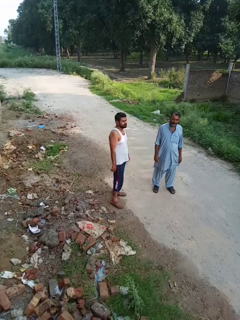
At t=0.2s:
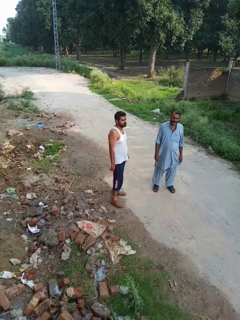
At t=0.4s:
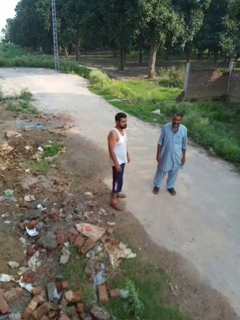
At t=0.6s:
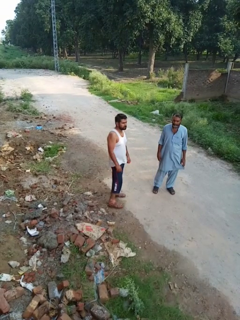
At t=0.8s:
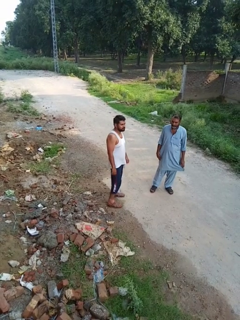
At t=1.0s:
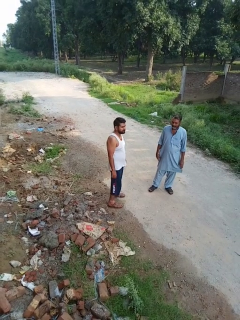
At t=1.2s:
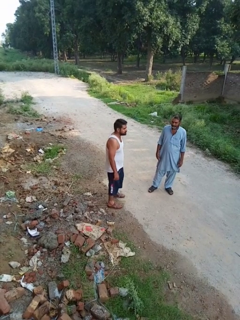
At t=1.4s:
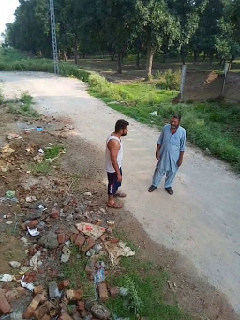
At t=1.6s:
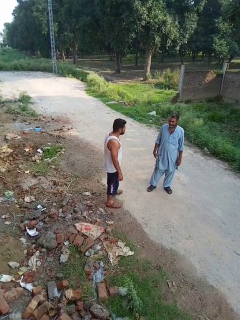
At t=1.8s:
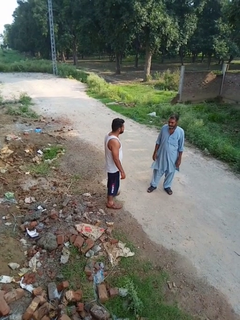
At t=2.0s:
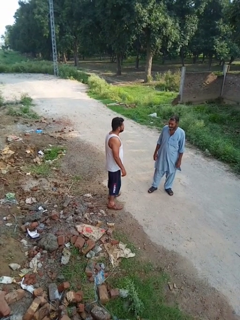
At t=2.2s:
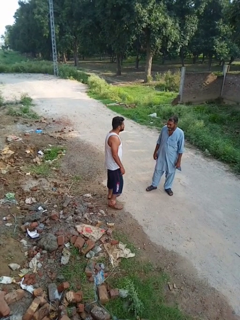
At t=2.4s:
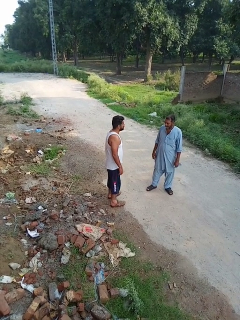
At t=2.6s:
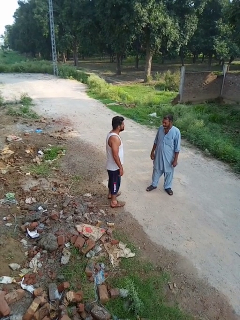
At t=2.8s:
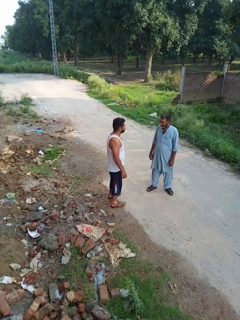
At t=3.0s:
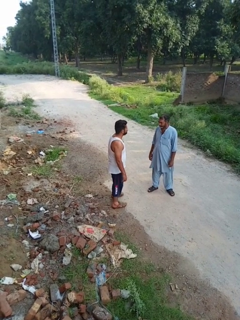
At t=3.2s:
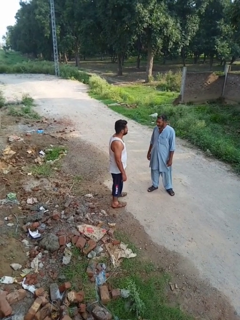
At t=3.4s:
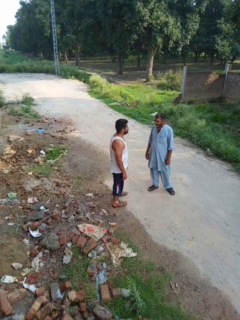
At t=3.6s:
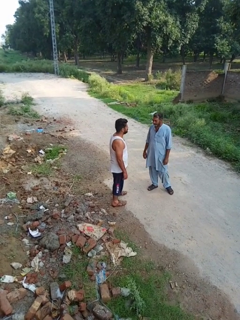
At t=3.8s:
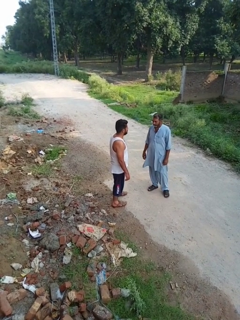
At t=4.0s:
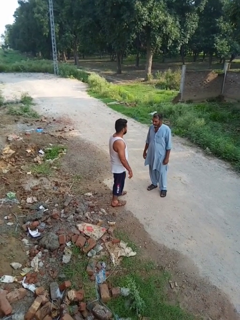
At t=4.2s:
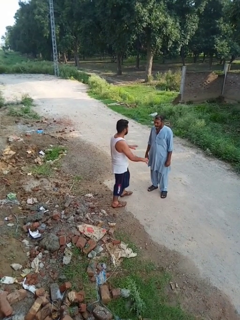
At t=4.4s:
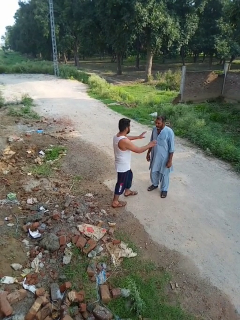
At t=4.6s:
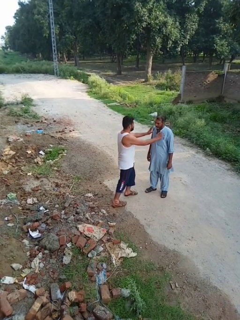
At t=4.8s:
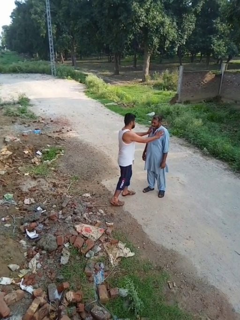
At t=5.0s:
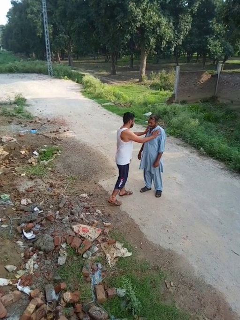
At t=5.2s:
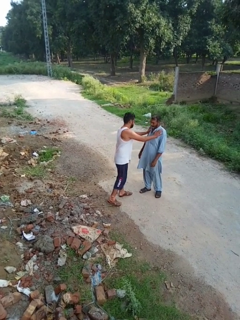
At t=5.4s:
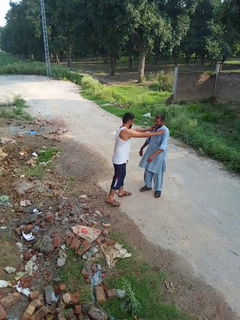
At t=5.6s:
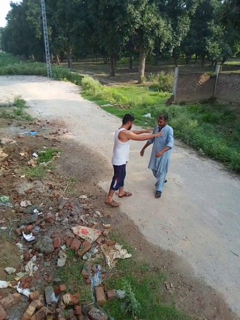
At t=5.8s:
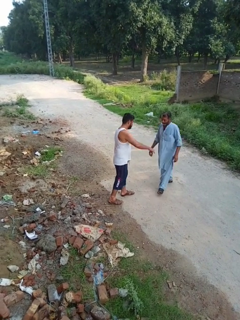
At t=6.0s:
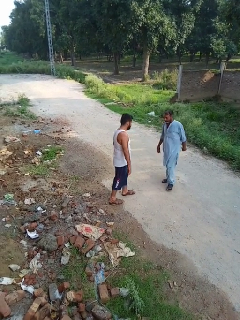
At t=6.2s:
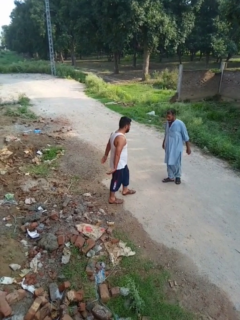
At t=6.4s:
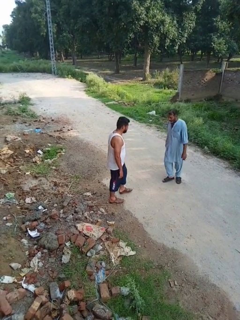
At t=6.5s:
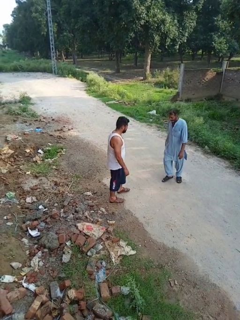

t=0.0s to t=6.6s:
person shoves person

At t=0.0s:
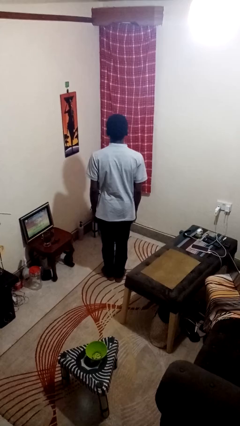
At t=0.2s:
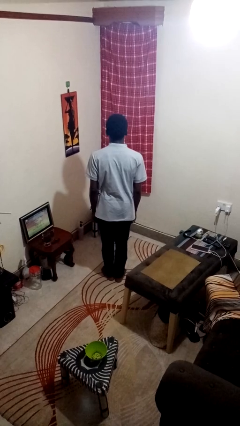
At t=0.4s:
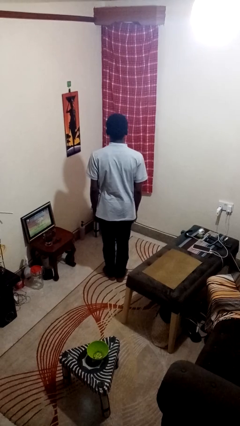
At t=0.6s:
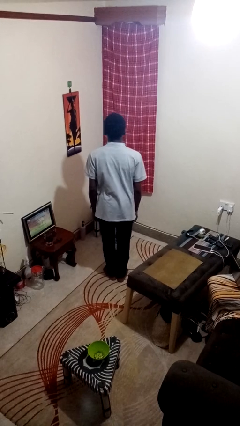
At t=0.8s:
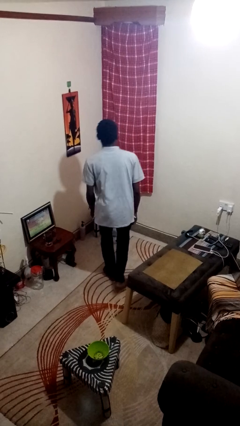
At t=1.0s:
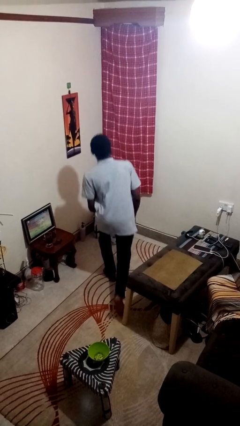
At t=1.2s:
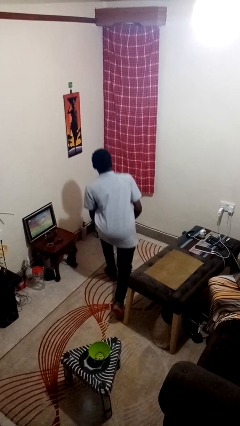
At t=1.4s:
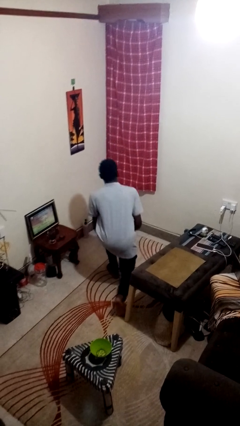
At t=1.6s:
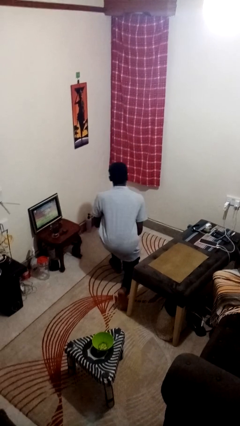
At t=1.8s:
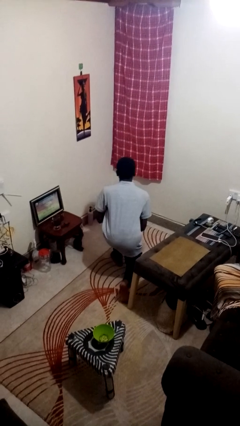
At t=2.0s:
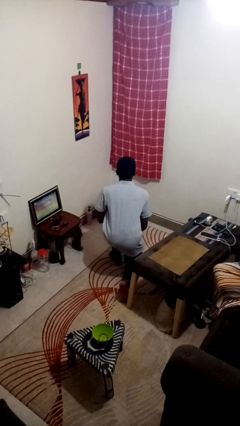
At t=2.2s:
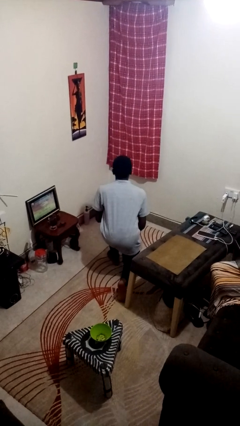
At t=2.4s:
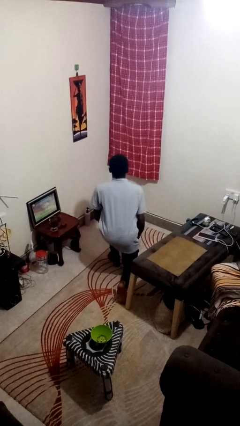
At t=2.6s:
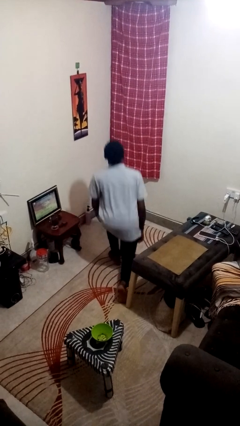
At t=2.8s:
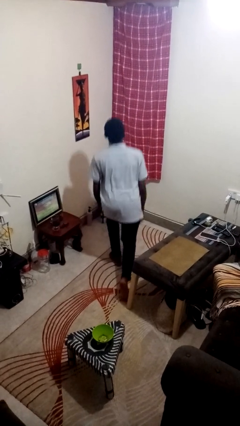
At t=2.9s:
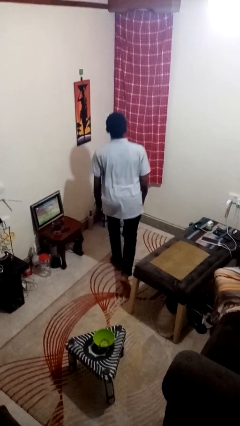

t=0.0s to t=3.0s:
person exercises with lunges

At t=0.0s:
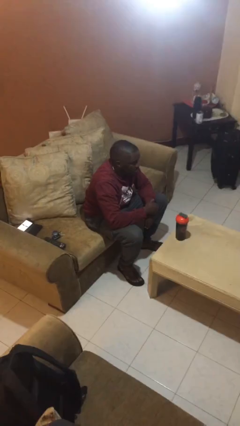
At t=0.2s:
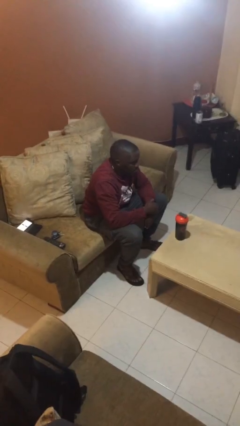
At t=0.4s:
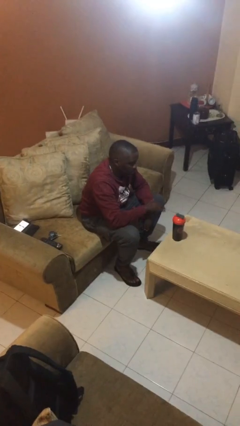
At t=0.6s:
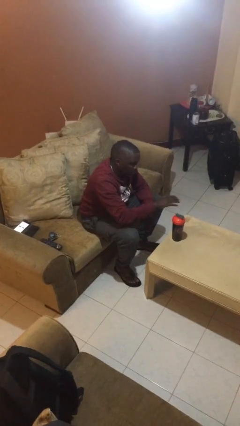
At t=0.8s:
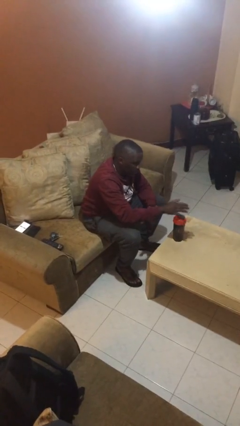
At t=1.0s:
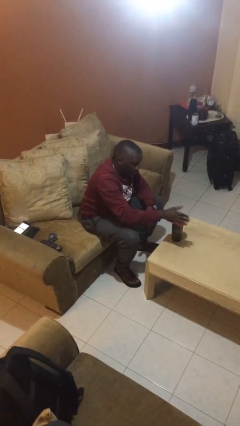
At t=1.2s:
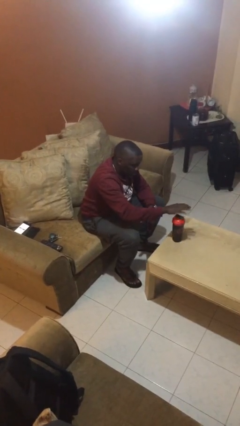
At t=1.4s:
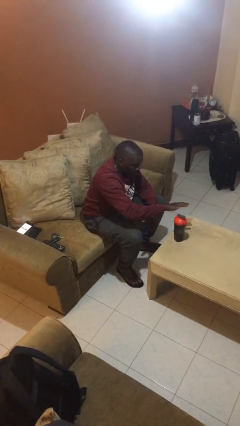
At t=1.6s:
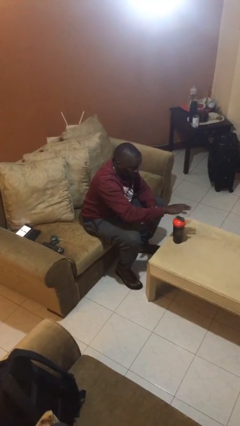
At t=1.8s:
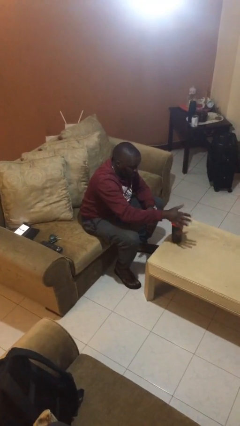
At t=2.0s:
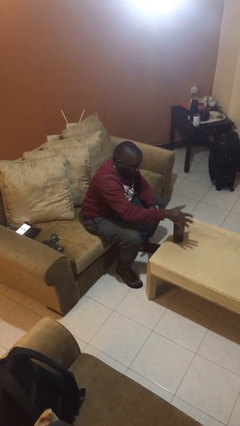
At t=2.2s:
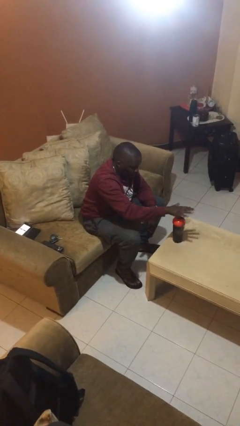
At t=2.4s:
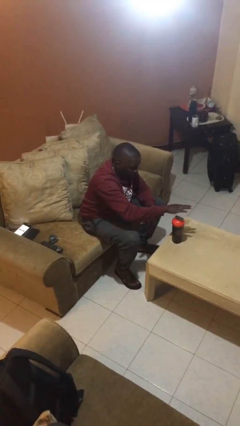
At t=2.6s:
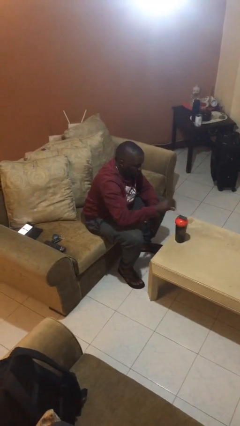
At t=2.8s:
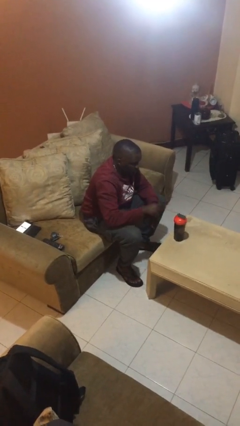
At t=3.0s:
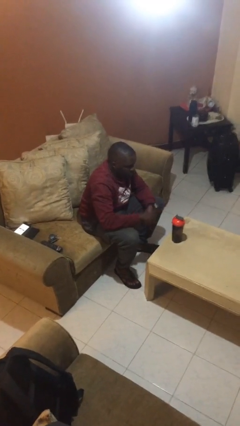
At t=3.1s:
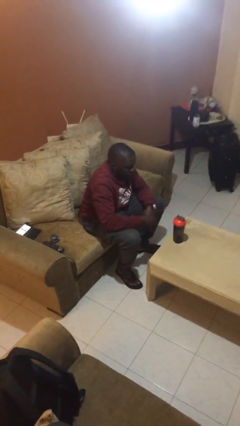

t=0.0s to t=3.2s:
person waves hand over object

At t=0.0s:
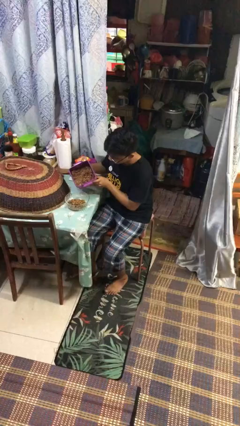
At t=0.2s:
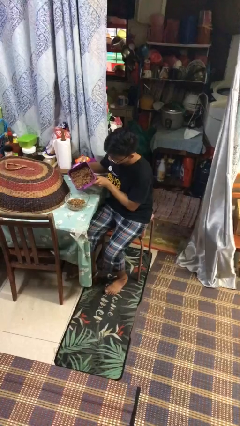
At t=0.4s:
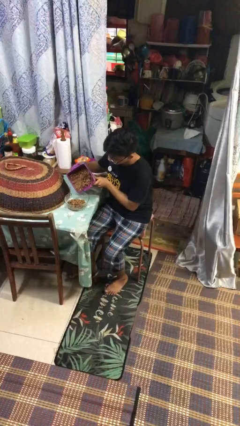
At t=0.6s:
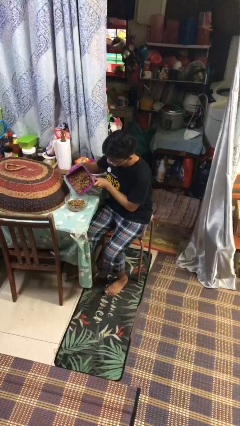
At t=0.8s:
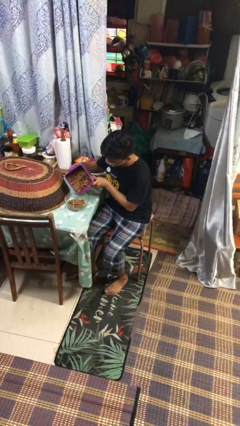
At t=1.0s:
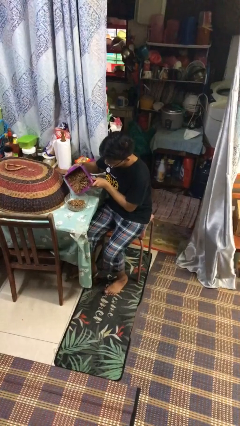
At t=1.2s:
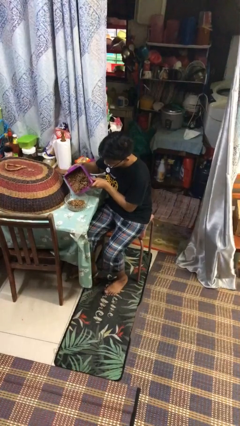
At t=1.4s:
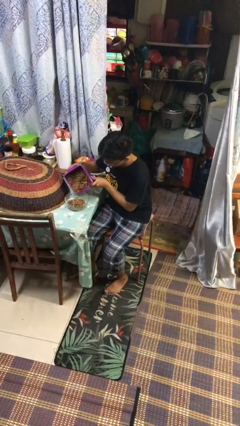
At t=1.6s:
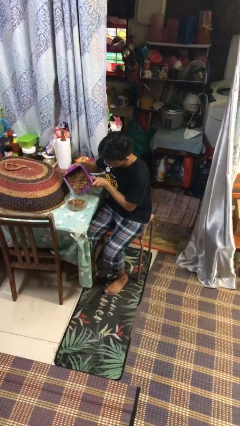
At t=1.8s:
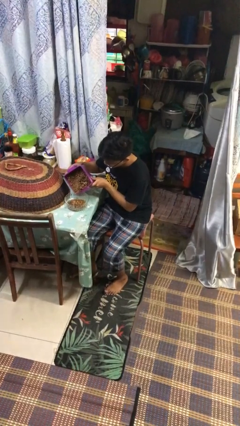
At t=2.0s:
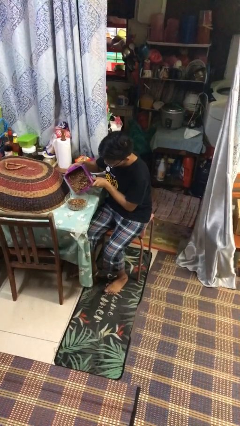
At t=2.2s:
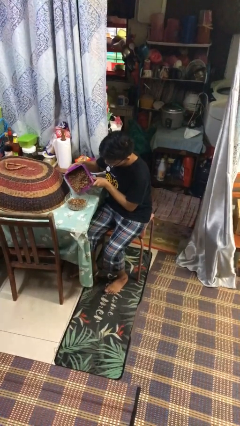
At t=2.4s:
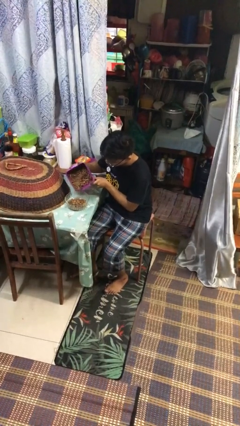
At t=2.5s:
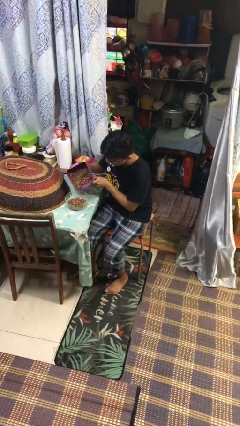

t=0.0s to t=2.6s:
person pours into bowl

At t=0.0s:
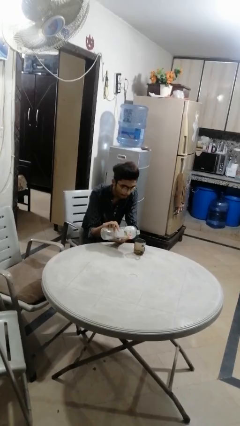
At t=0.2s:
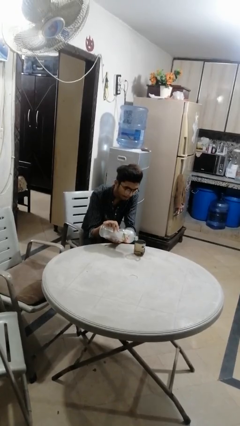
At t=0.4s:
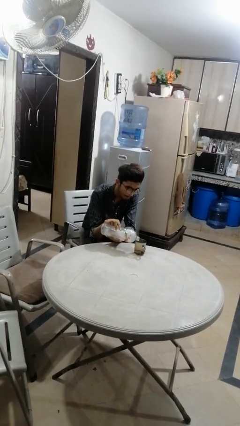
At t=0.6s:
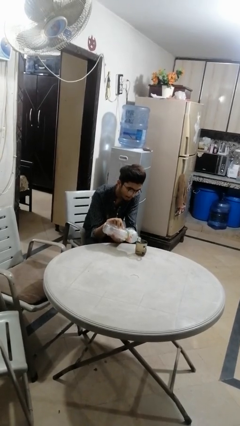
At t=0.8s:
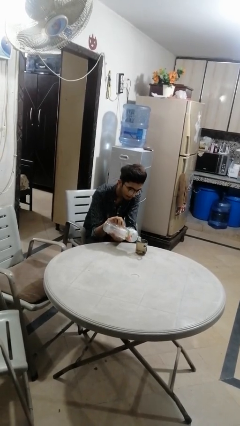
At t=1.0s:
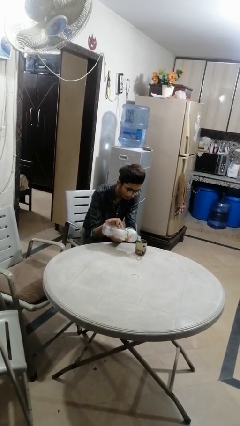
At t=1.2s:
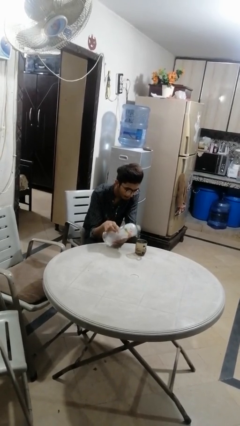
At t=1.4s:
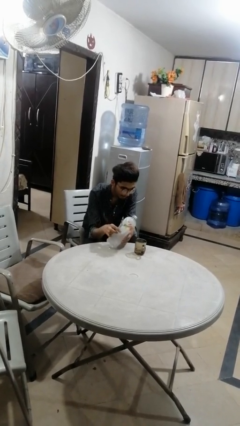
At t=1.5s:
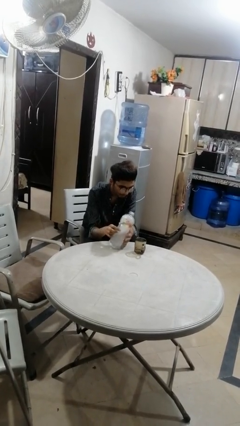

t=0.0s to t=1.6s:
person pours liquid into cup

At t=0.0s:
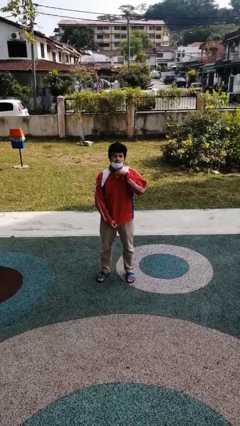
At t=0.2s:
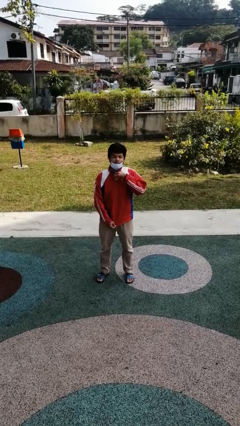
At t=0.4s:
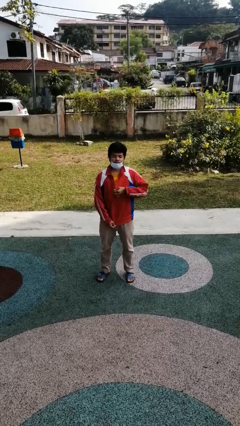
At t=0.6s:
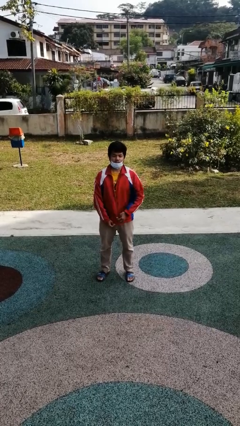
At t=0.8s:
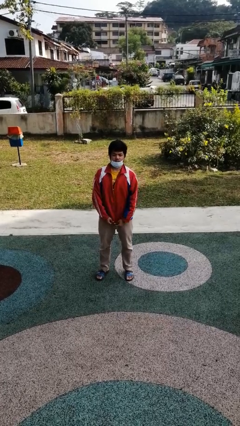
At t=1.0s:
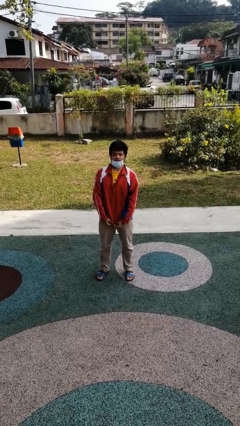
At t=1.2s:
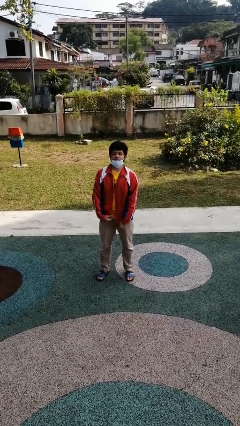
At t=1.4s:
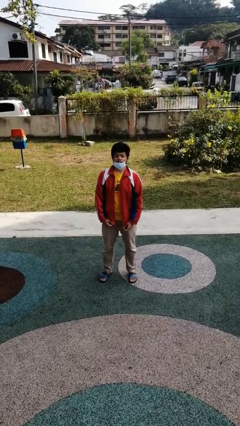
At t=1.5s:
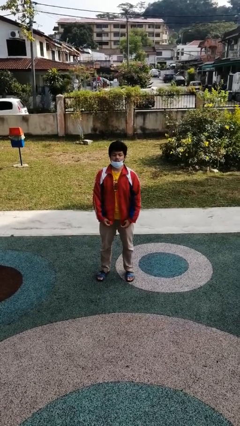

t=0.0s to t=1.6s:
person unzips jacket
